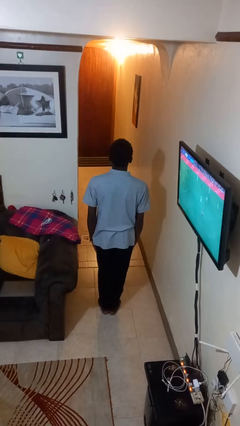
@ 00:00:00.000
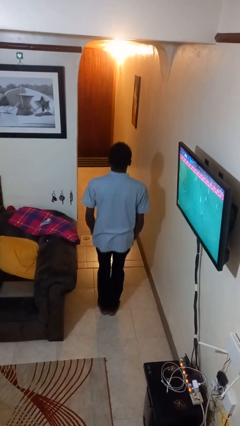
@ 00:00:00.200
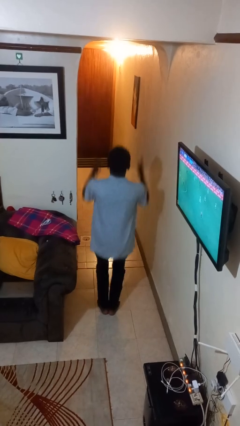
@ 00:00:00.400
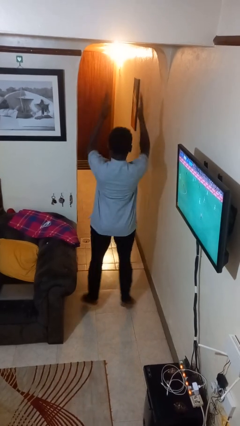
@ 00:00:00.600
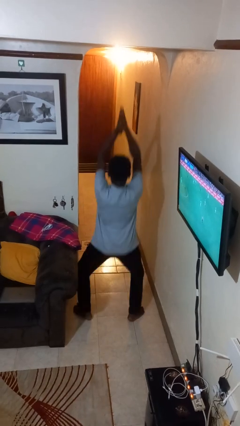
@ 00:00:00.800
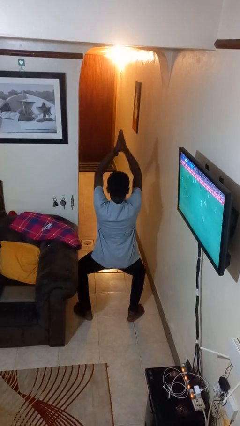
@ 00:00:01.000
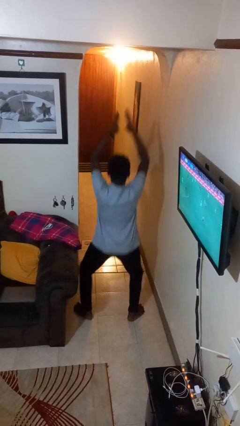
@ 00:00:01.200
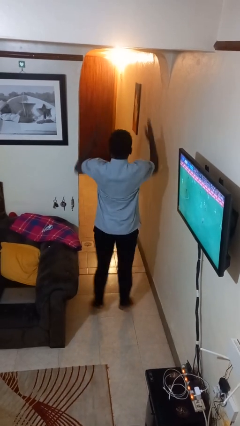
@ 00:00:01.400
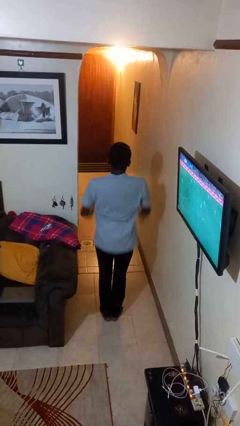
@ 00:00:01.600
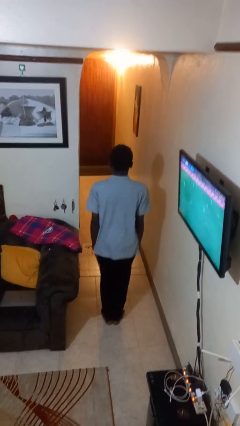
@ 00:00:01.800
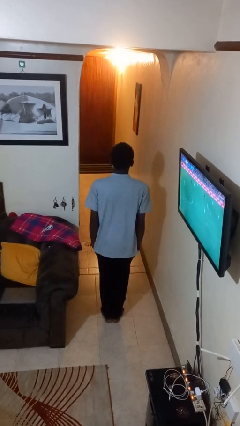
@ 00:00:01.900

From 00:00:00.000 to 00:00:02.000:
person exercises with jumping jacks

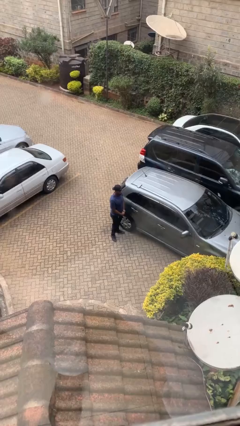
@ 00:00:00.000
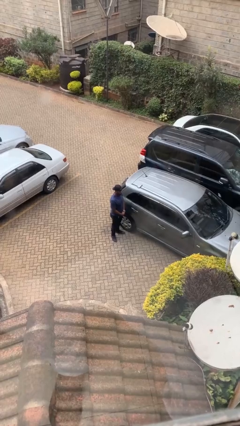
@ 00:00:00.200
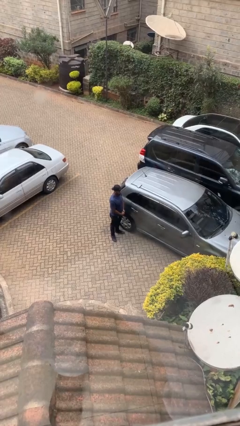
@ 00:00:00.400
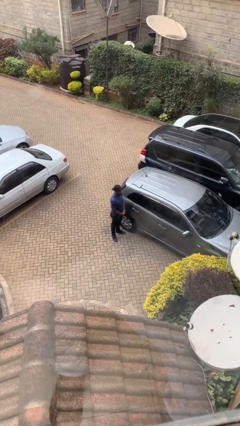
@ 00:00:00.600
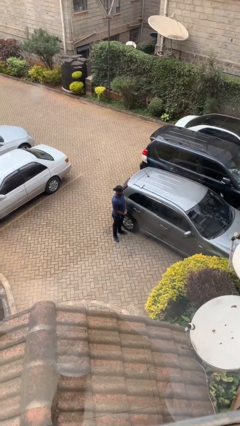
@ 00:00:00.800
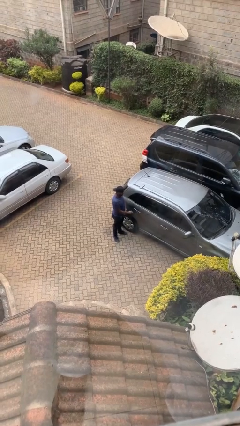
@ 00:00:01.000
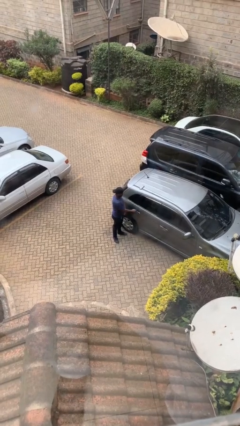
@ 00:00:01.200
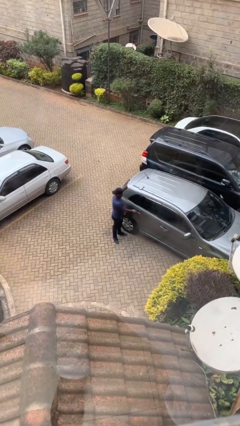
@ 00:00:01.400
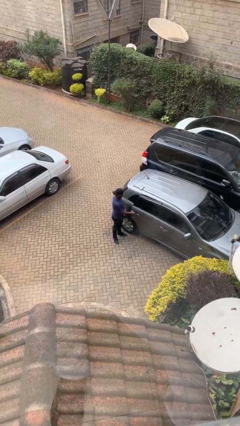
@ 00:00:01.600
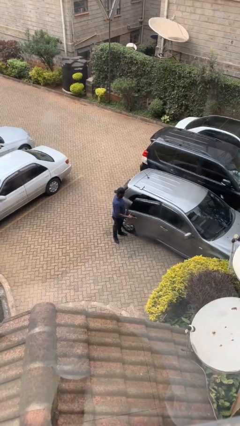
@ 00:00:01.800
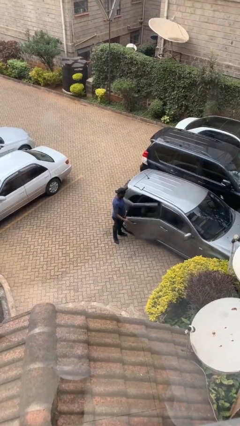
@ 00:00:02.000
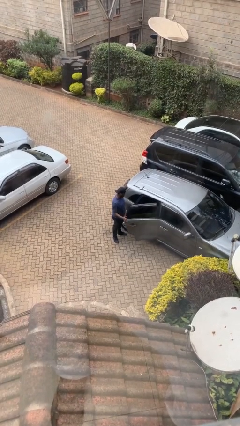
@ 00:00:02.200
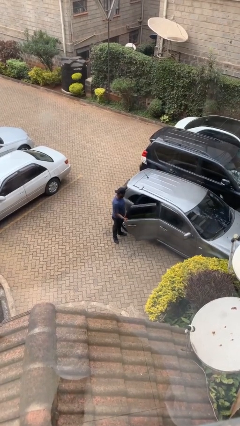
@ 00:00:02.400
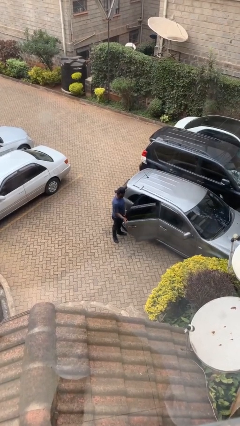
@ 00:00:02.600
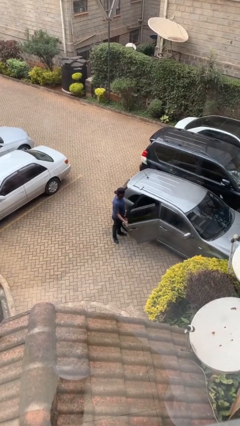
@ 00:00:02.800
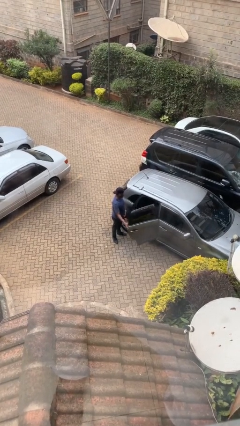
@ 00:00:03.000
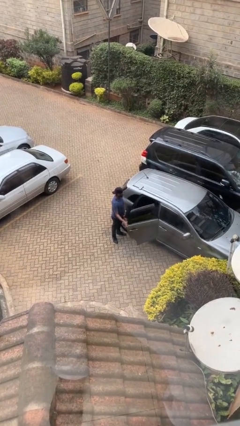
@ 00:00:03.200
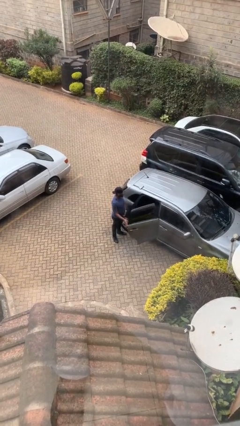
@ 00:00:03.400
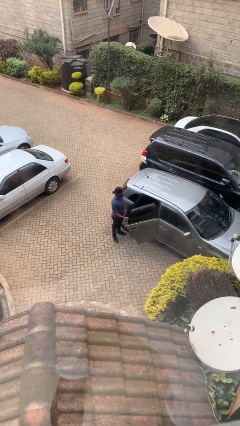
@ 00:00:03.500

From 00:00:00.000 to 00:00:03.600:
person opens car door

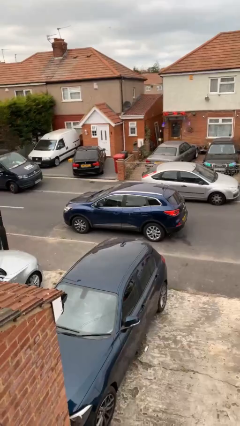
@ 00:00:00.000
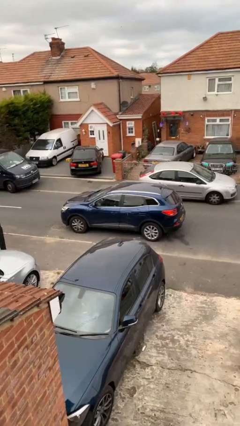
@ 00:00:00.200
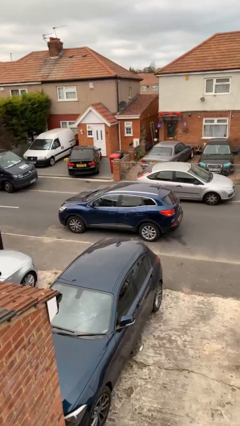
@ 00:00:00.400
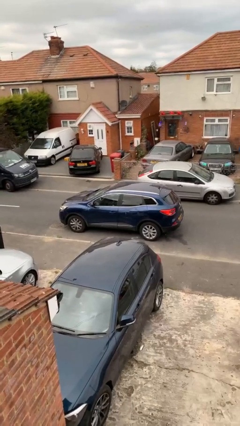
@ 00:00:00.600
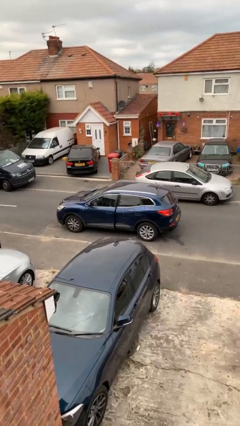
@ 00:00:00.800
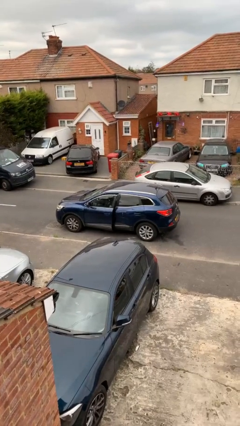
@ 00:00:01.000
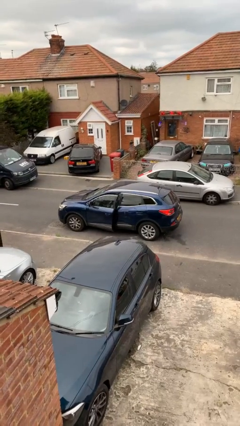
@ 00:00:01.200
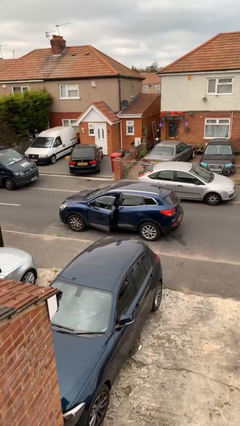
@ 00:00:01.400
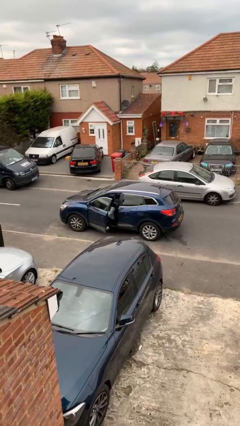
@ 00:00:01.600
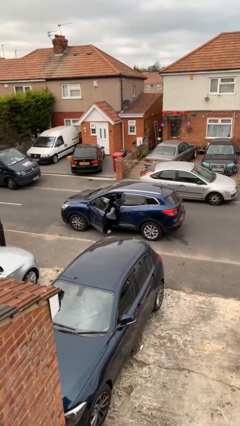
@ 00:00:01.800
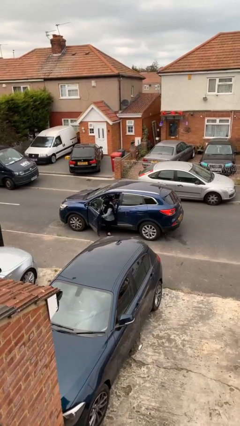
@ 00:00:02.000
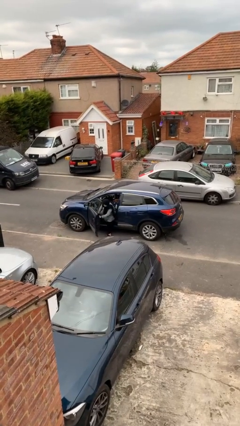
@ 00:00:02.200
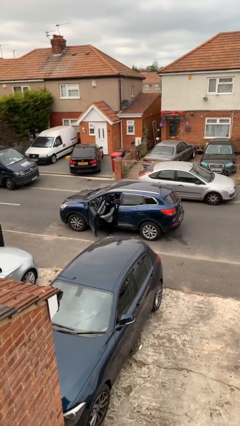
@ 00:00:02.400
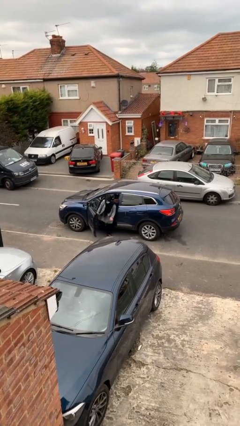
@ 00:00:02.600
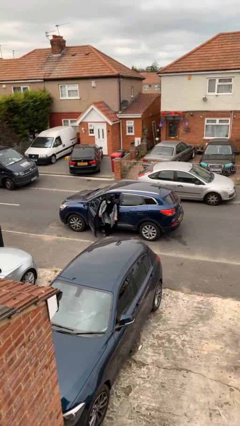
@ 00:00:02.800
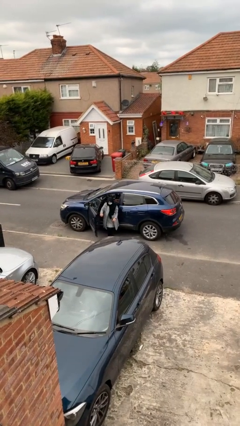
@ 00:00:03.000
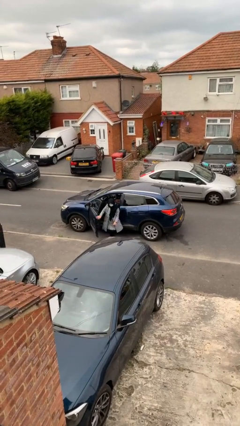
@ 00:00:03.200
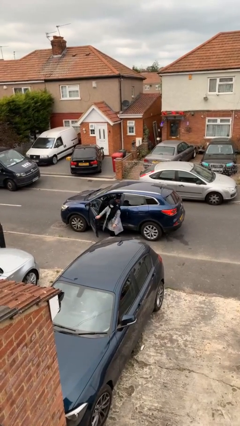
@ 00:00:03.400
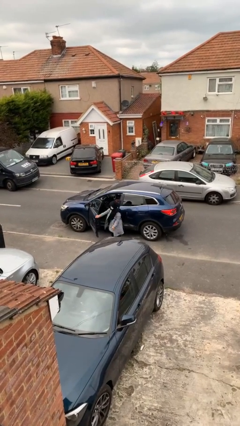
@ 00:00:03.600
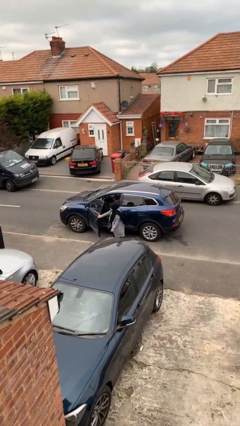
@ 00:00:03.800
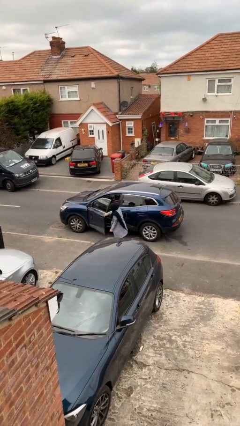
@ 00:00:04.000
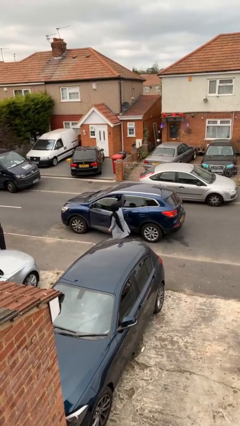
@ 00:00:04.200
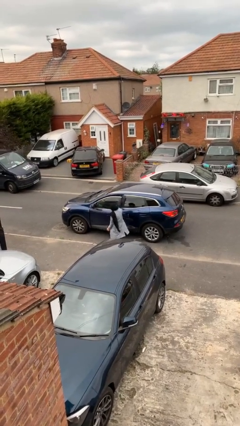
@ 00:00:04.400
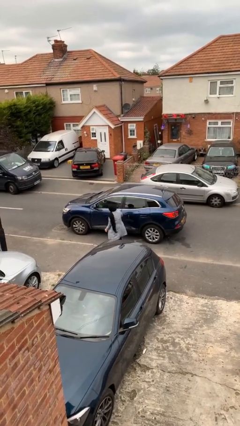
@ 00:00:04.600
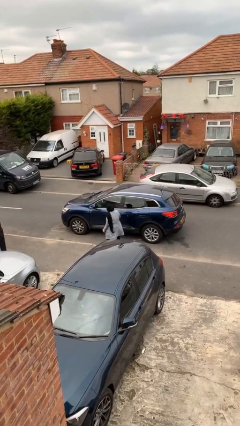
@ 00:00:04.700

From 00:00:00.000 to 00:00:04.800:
car drops off person

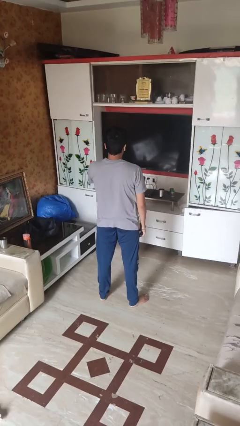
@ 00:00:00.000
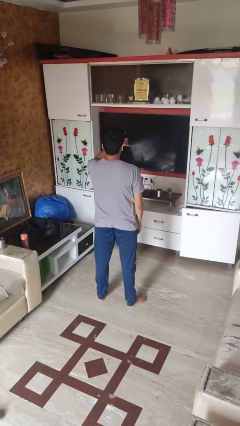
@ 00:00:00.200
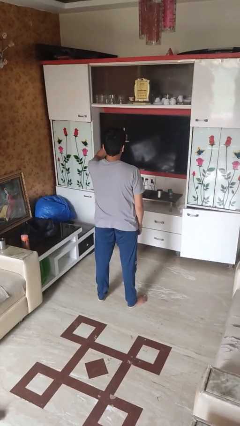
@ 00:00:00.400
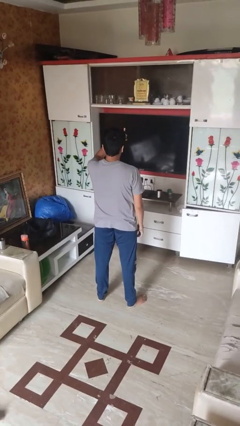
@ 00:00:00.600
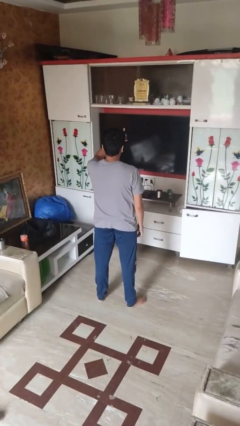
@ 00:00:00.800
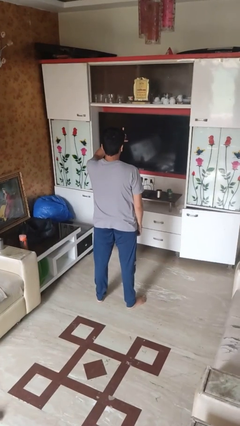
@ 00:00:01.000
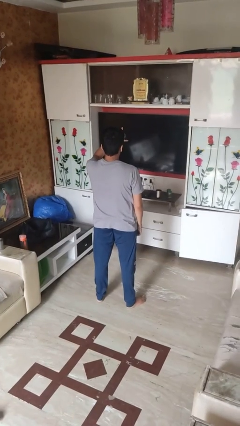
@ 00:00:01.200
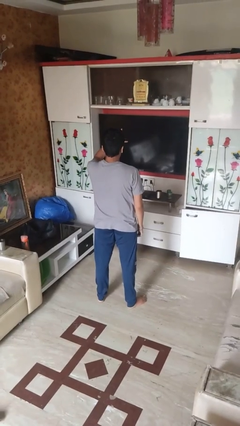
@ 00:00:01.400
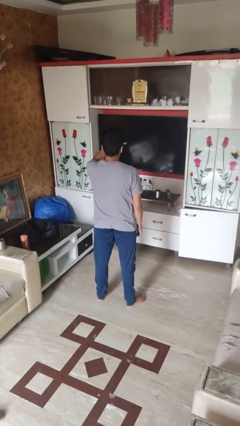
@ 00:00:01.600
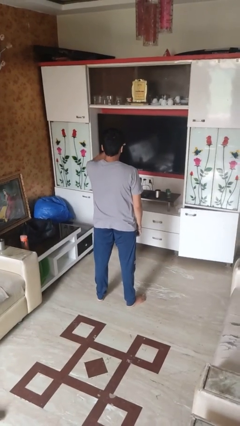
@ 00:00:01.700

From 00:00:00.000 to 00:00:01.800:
person gestures hang loose

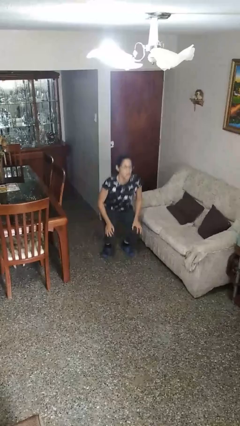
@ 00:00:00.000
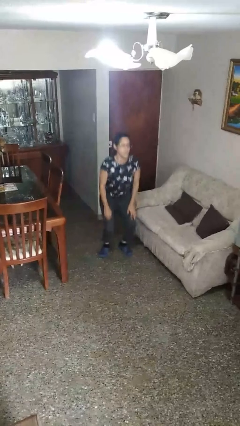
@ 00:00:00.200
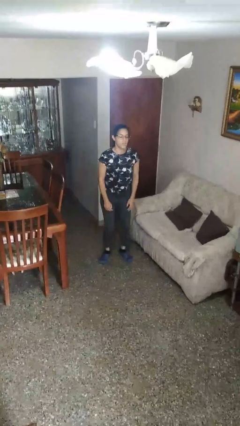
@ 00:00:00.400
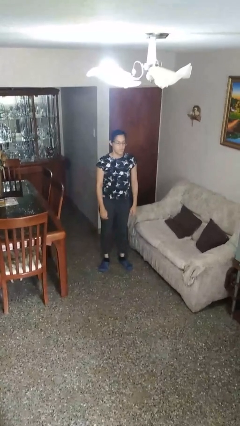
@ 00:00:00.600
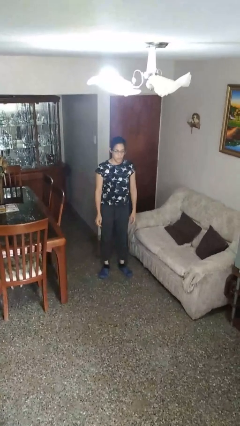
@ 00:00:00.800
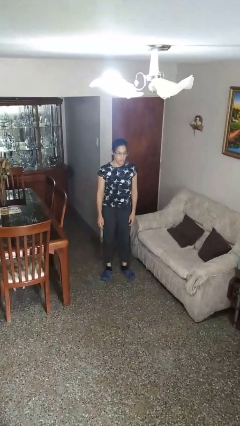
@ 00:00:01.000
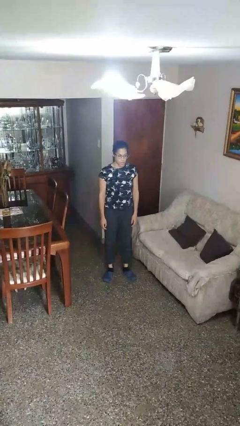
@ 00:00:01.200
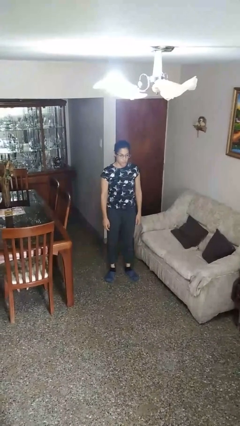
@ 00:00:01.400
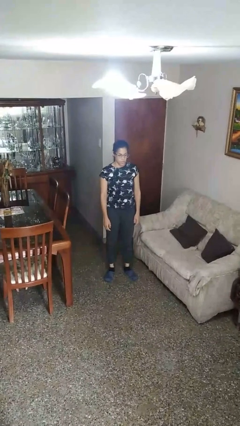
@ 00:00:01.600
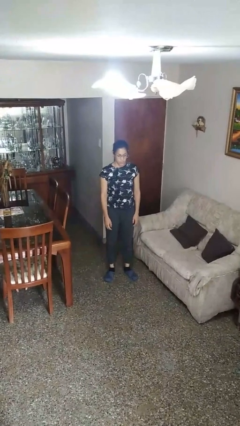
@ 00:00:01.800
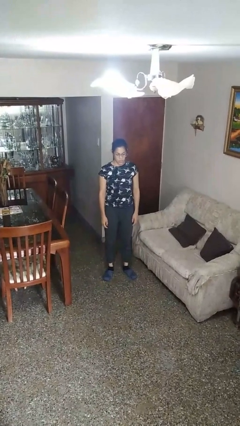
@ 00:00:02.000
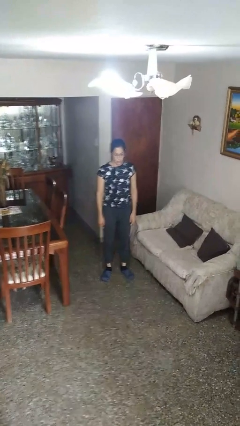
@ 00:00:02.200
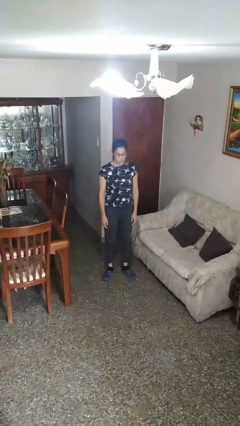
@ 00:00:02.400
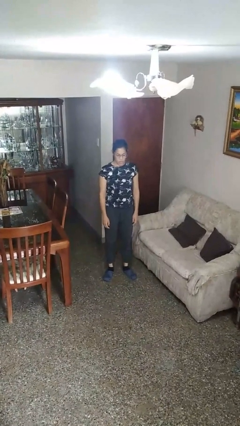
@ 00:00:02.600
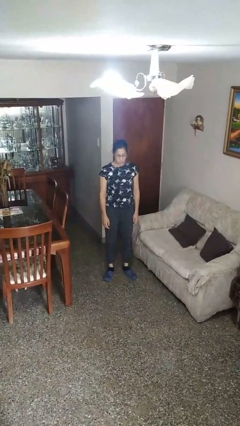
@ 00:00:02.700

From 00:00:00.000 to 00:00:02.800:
person stands up

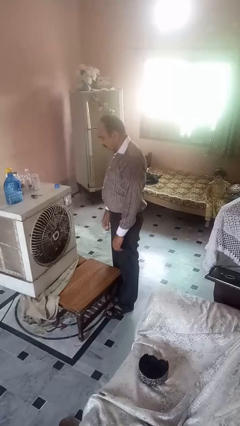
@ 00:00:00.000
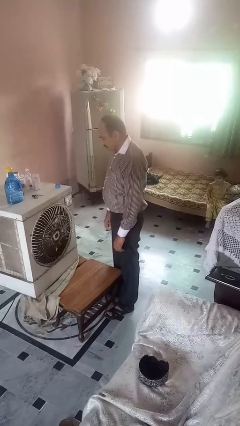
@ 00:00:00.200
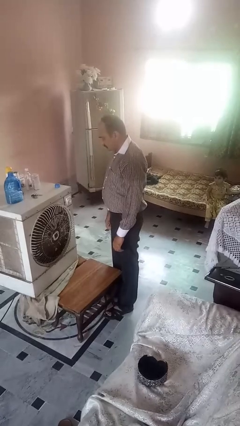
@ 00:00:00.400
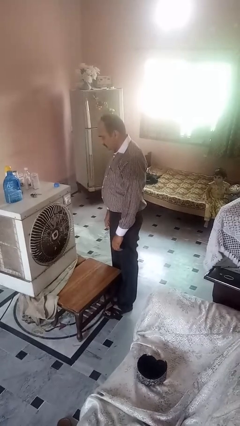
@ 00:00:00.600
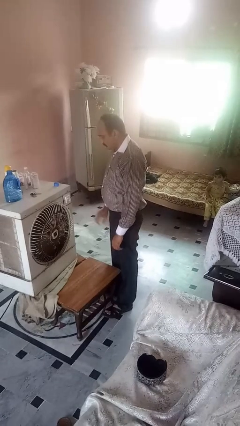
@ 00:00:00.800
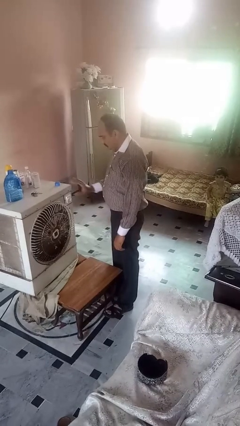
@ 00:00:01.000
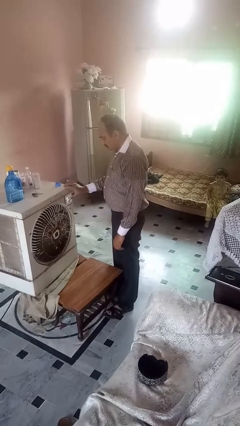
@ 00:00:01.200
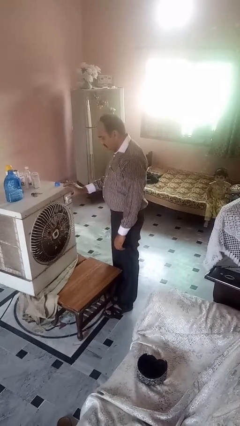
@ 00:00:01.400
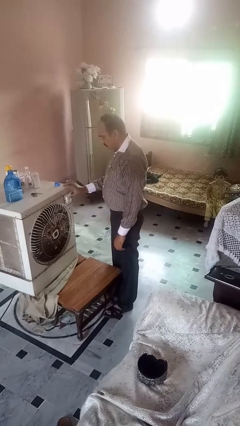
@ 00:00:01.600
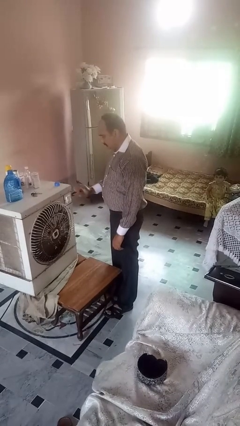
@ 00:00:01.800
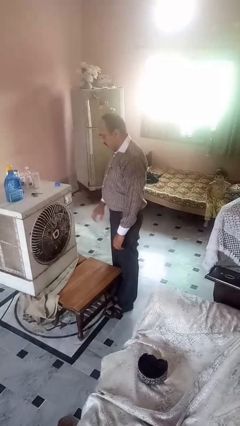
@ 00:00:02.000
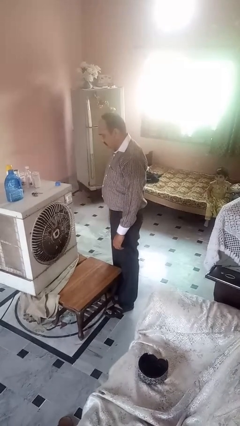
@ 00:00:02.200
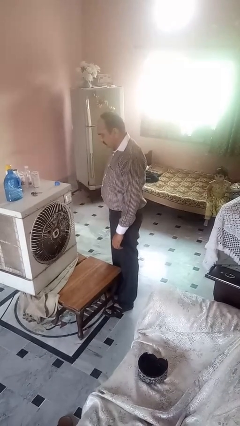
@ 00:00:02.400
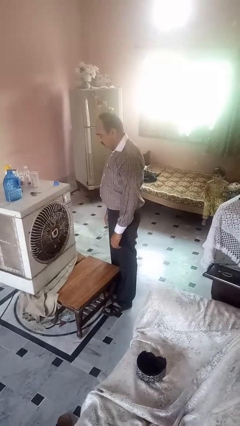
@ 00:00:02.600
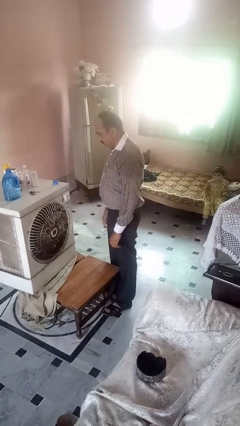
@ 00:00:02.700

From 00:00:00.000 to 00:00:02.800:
person turns off fan
